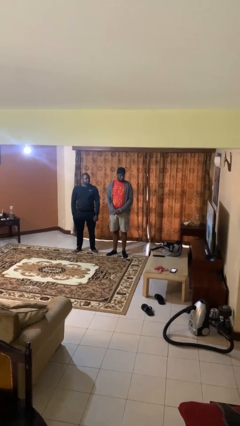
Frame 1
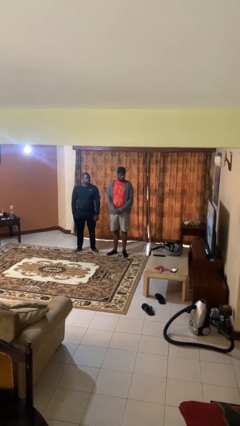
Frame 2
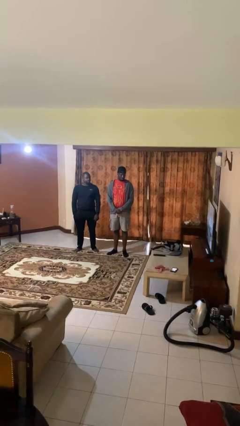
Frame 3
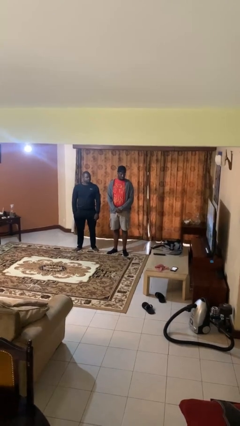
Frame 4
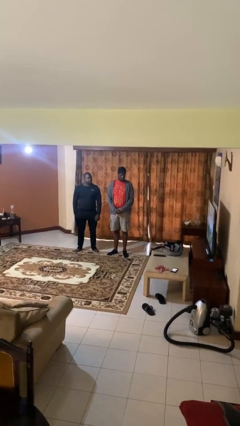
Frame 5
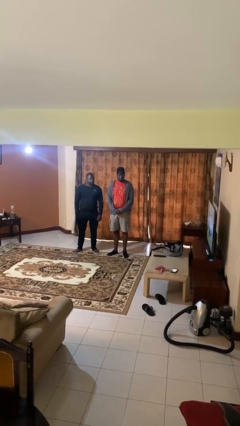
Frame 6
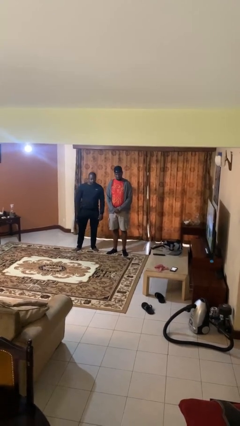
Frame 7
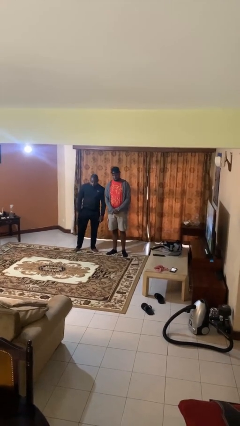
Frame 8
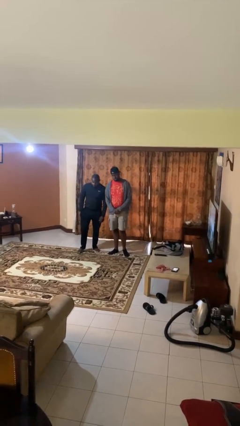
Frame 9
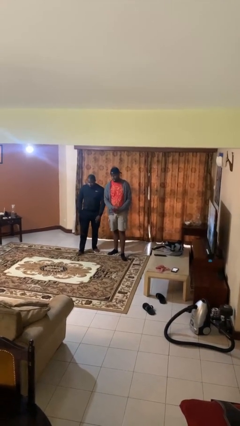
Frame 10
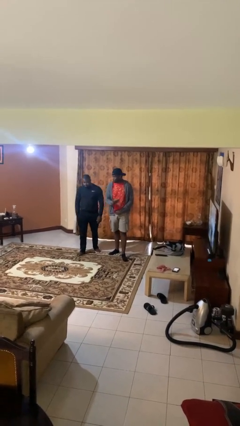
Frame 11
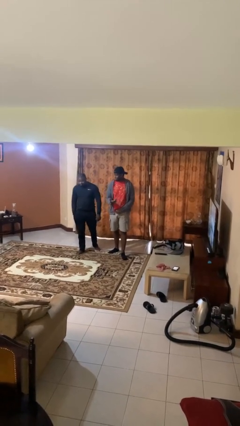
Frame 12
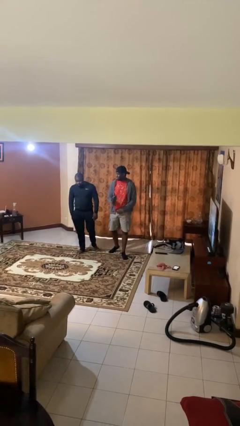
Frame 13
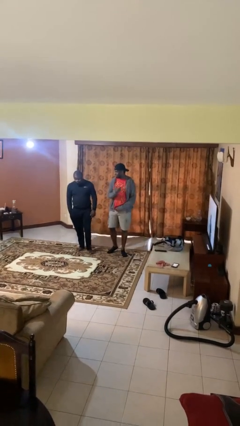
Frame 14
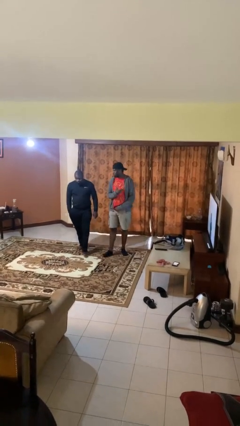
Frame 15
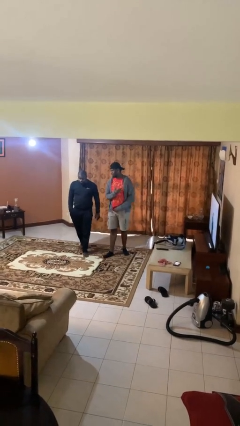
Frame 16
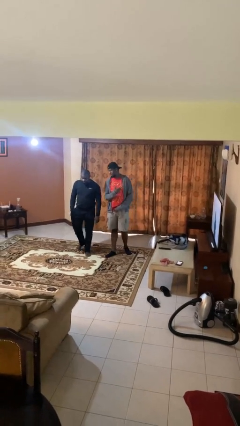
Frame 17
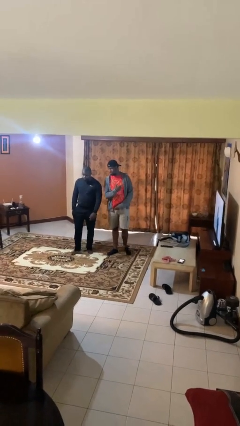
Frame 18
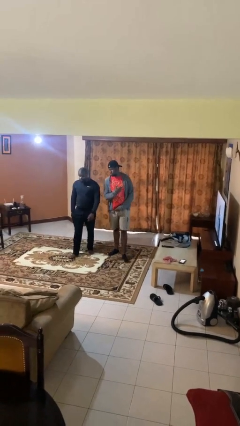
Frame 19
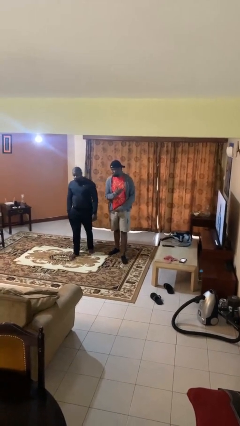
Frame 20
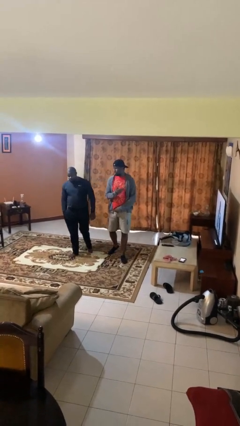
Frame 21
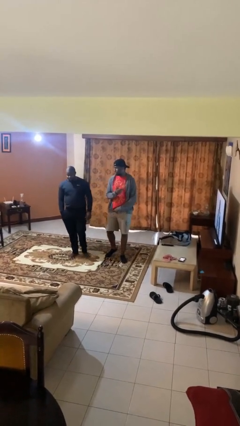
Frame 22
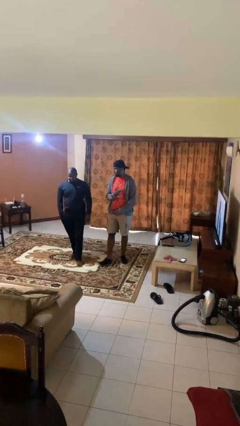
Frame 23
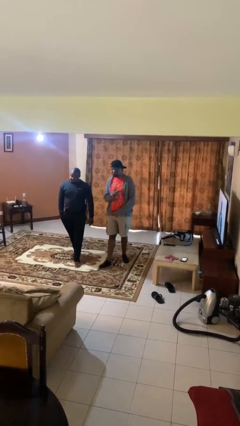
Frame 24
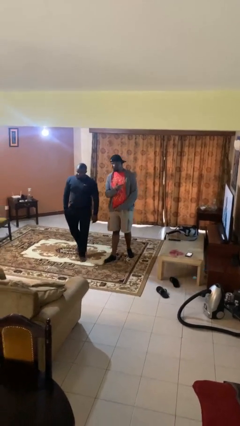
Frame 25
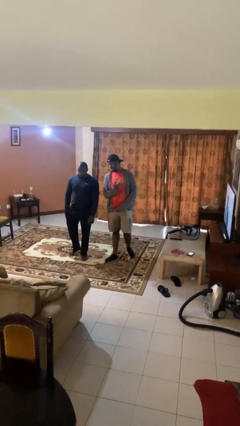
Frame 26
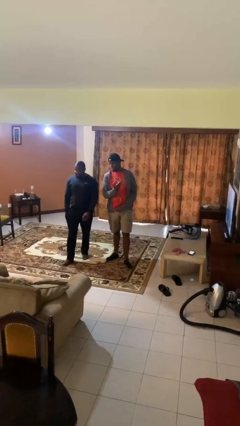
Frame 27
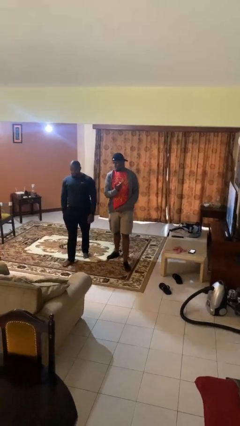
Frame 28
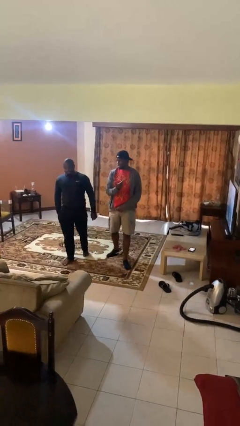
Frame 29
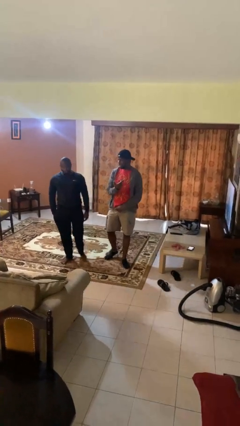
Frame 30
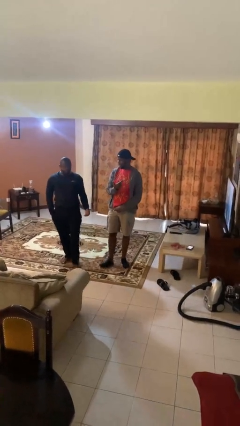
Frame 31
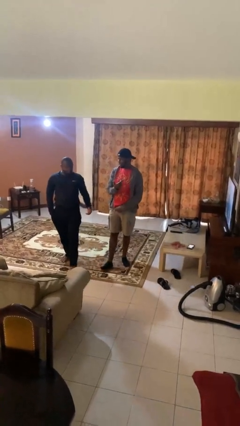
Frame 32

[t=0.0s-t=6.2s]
person talks to person

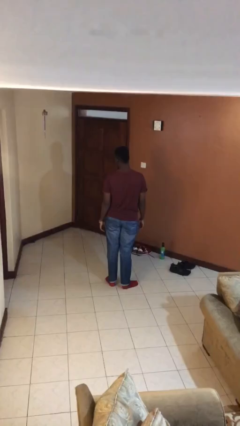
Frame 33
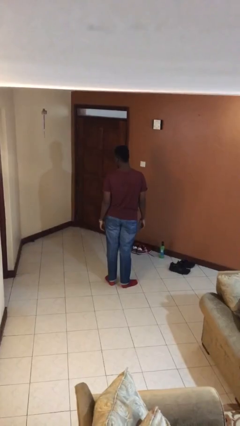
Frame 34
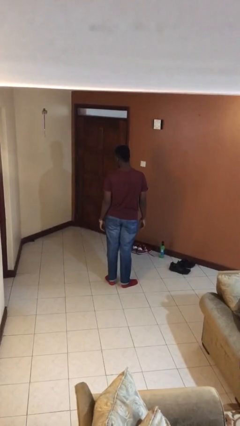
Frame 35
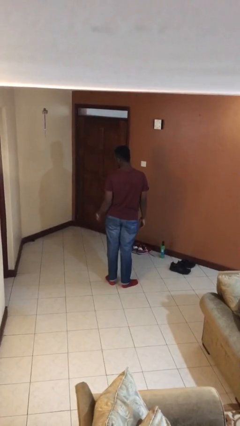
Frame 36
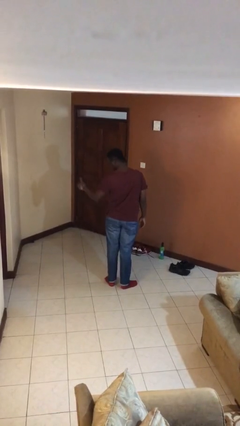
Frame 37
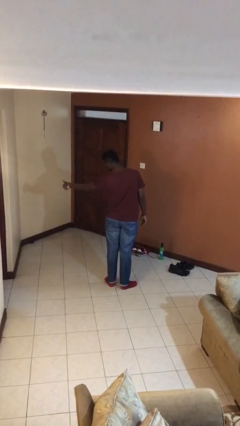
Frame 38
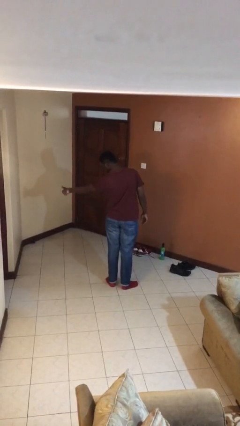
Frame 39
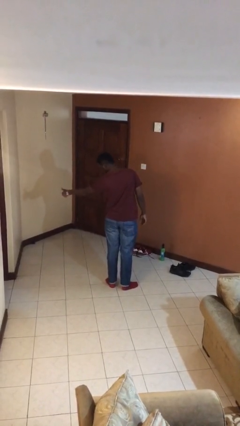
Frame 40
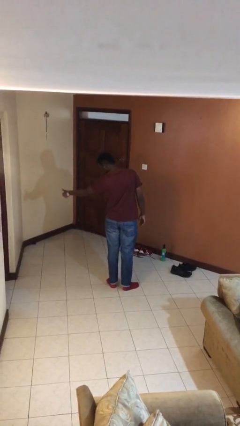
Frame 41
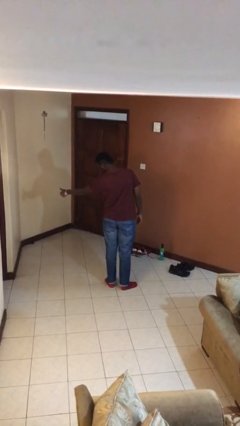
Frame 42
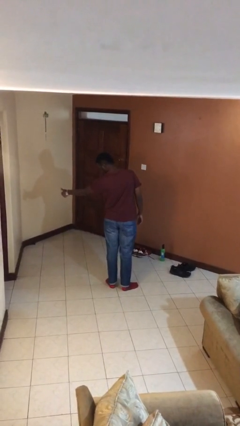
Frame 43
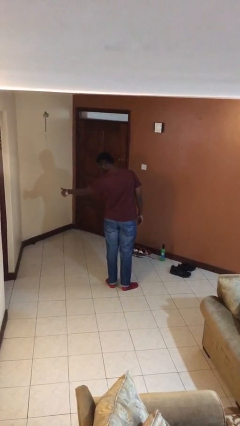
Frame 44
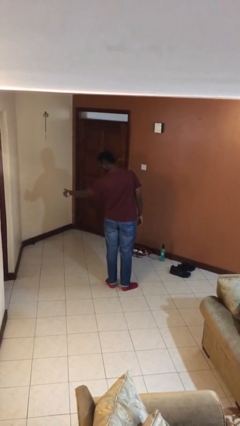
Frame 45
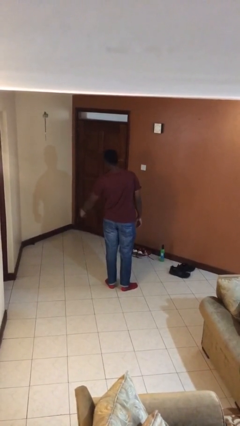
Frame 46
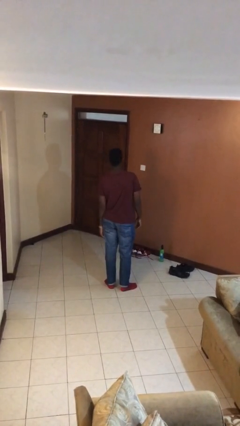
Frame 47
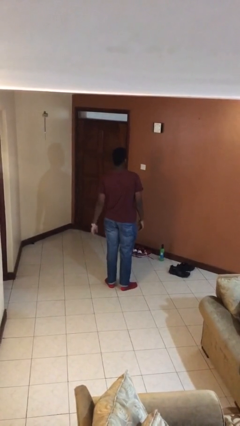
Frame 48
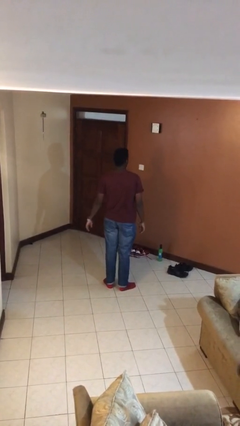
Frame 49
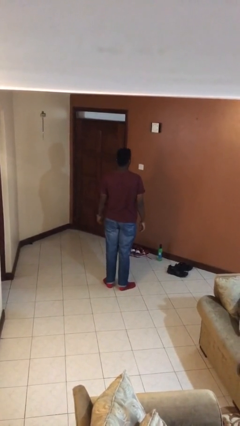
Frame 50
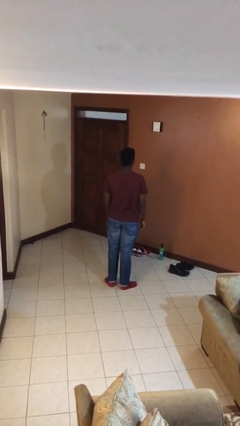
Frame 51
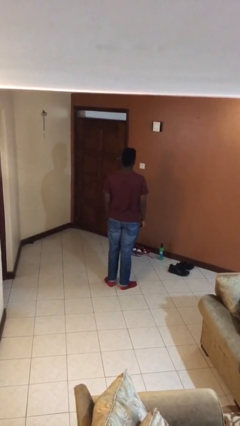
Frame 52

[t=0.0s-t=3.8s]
person gestures thumbs up

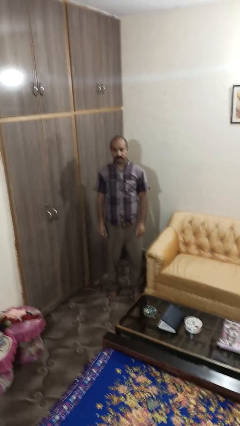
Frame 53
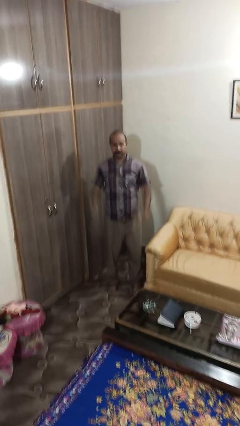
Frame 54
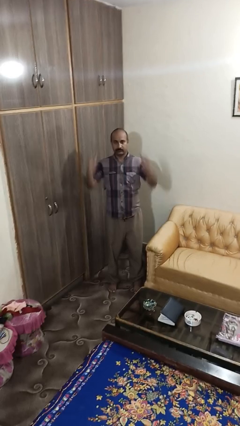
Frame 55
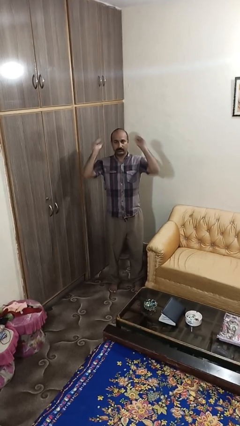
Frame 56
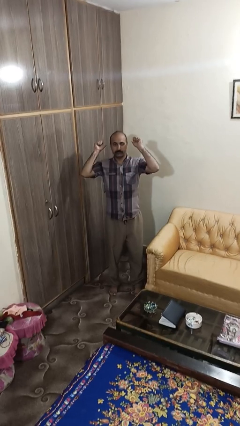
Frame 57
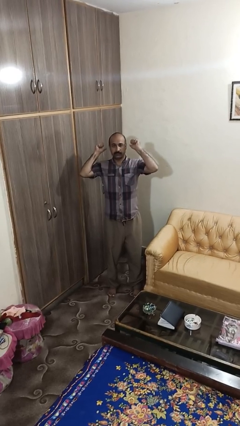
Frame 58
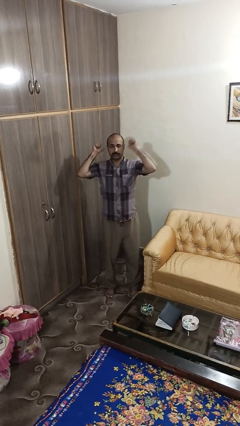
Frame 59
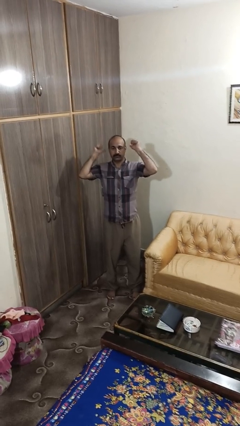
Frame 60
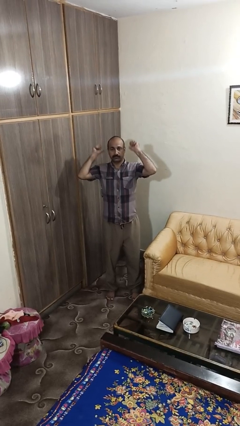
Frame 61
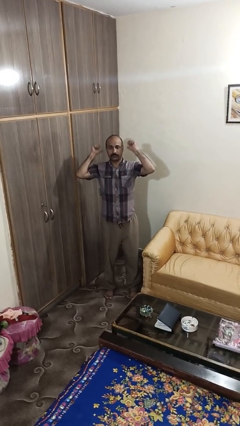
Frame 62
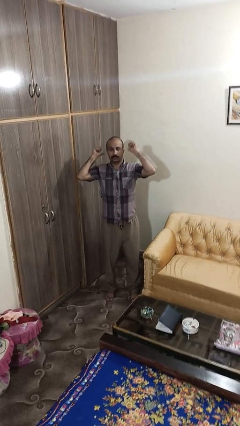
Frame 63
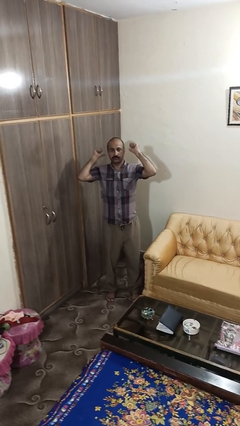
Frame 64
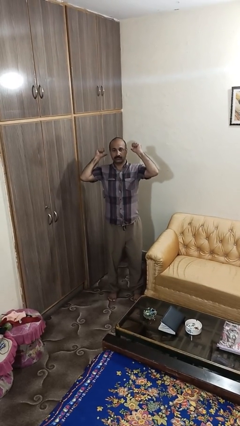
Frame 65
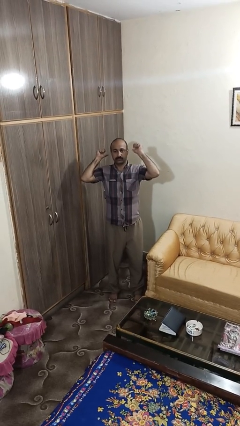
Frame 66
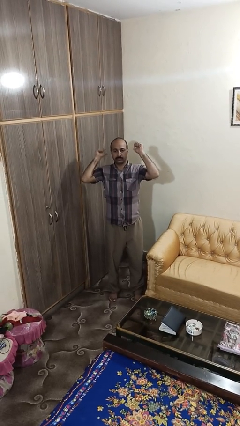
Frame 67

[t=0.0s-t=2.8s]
person gestures behind me

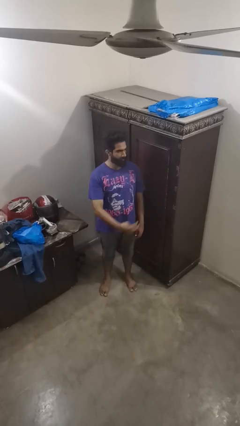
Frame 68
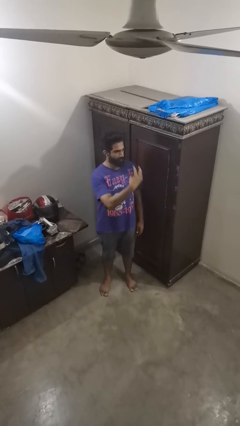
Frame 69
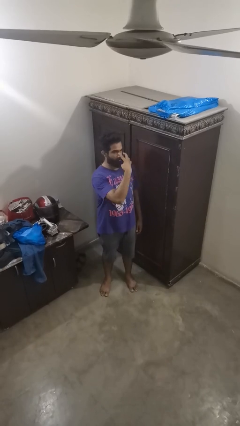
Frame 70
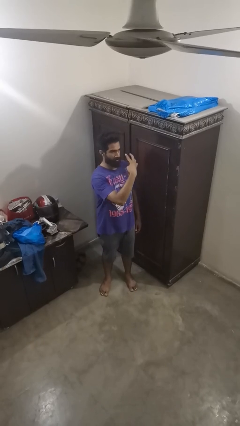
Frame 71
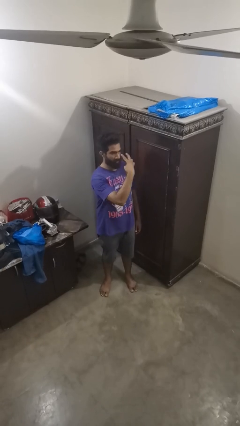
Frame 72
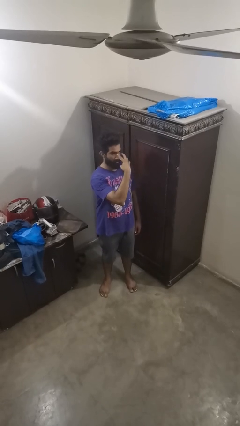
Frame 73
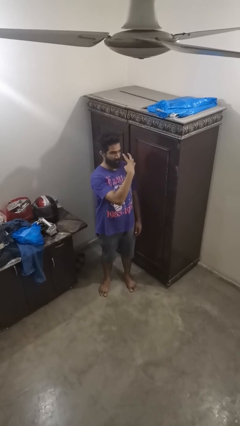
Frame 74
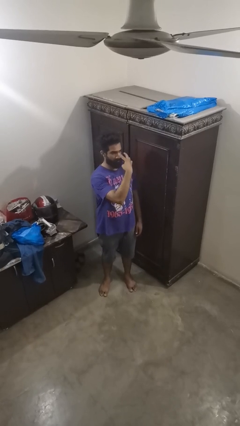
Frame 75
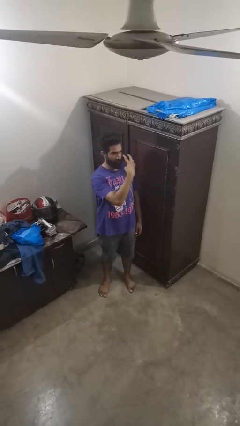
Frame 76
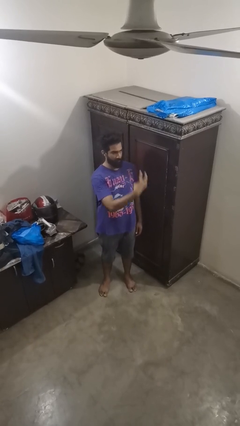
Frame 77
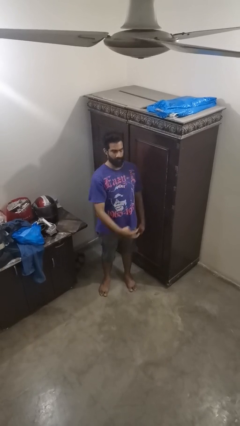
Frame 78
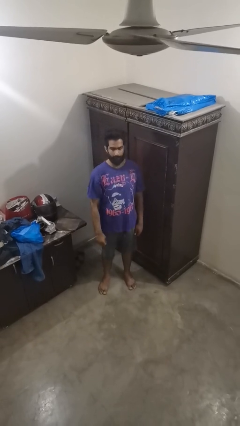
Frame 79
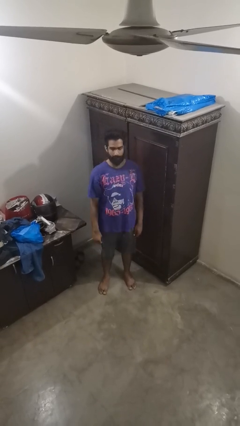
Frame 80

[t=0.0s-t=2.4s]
person gestures watch closely

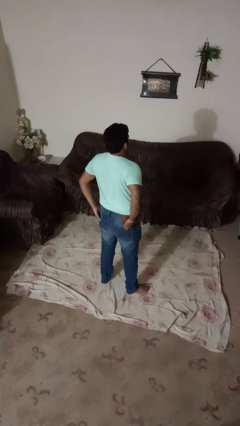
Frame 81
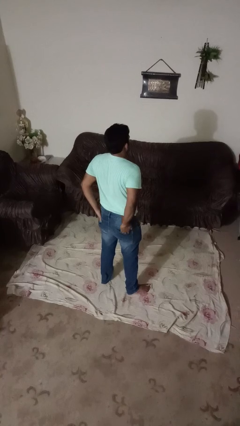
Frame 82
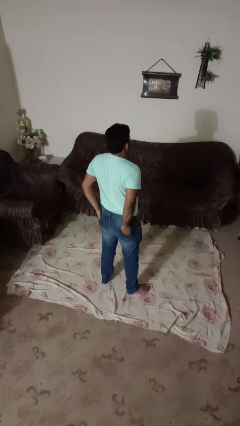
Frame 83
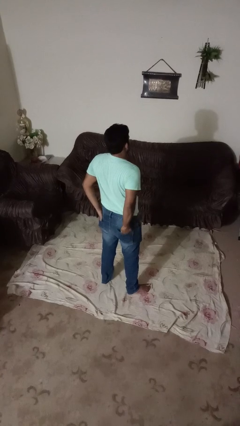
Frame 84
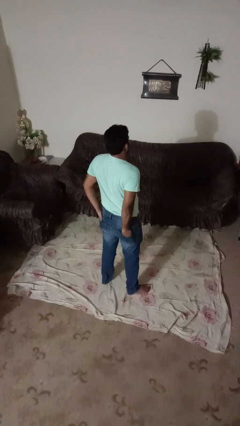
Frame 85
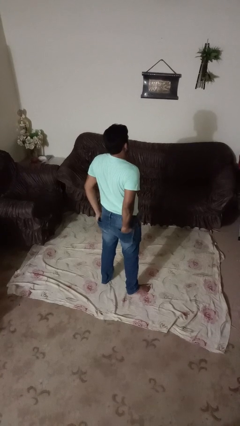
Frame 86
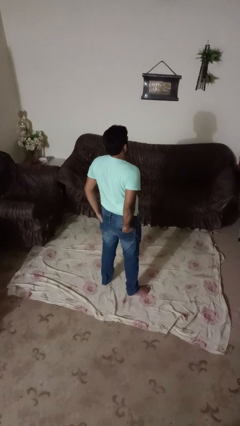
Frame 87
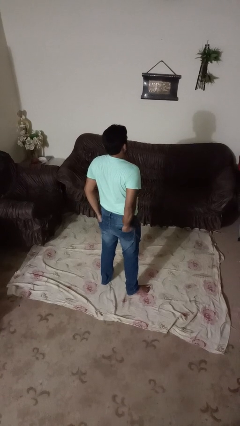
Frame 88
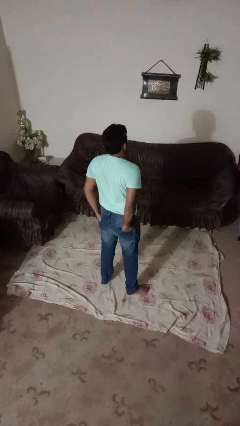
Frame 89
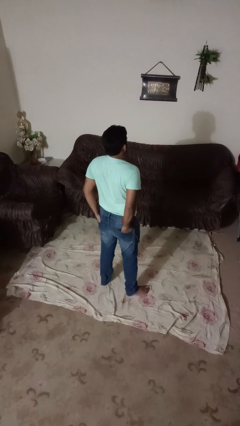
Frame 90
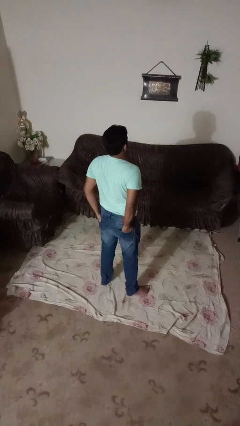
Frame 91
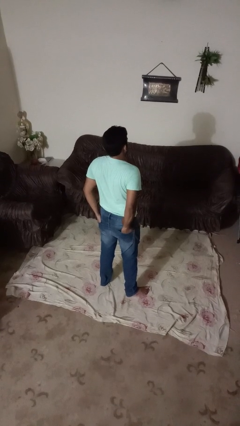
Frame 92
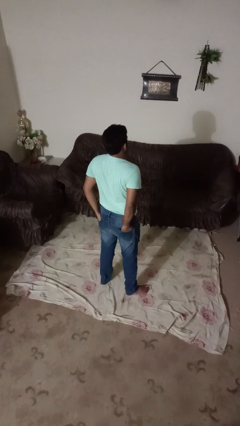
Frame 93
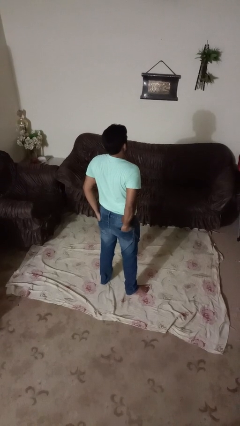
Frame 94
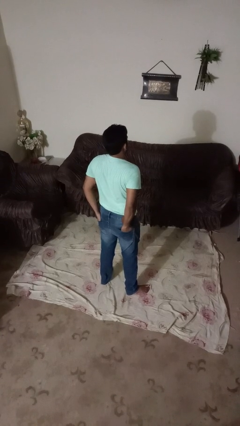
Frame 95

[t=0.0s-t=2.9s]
person puts hands in back pockets
